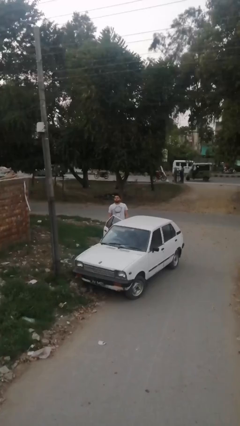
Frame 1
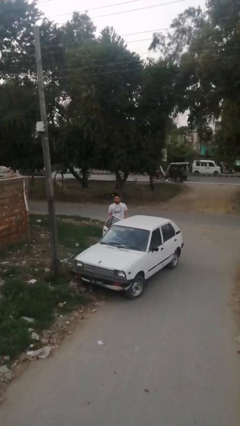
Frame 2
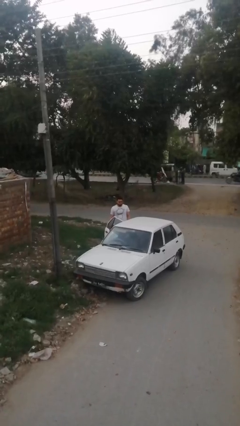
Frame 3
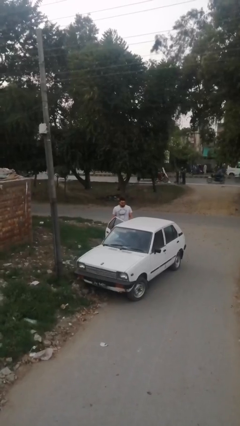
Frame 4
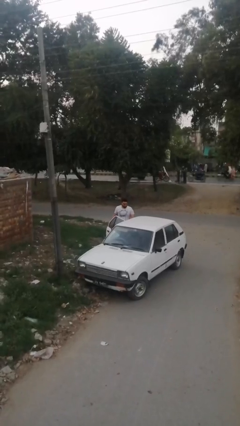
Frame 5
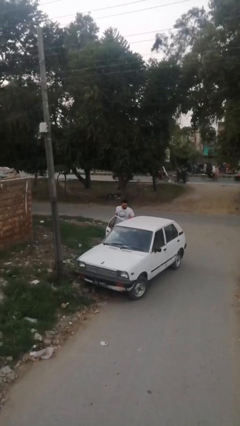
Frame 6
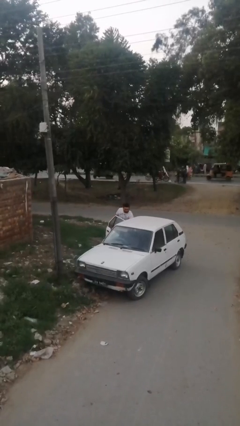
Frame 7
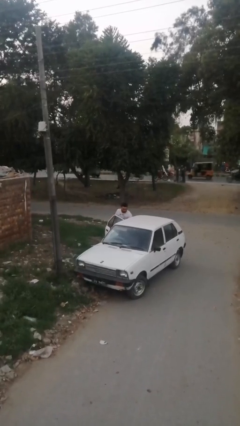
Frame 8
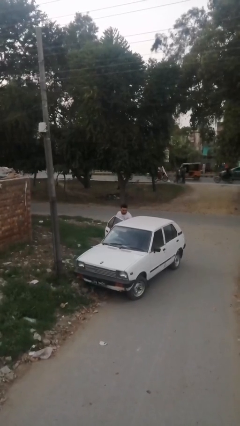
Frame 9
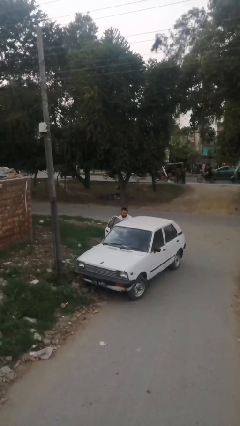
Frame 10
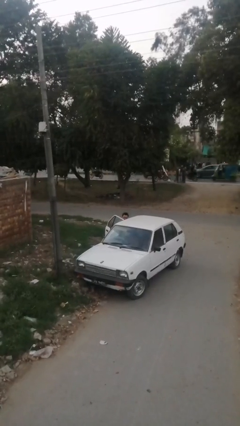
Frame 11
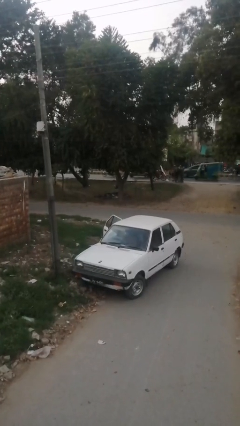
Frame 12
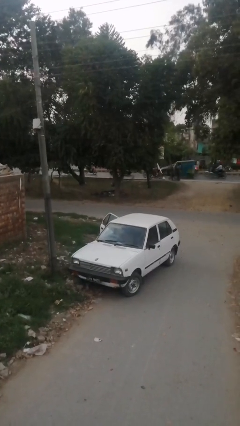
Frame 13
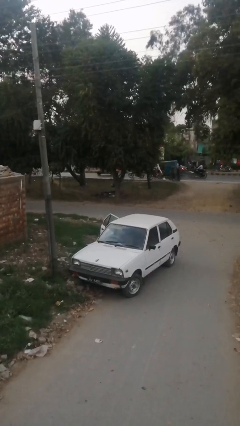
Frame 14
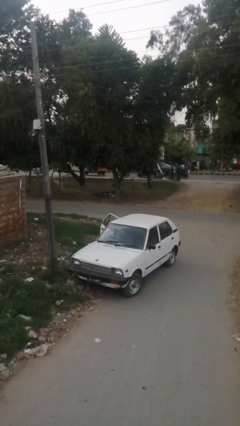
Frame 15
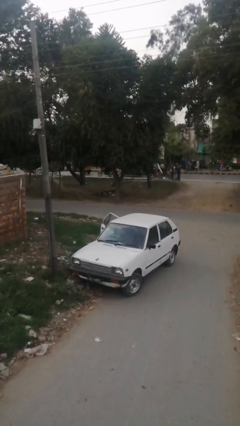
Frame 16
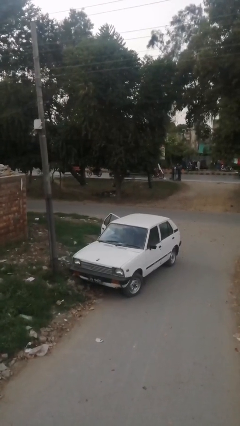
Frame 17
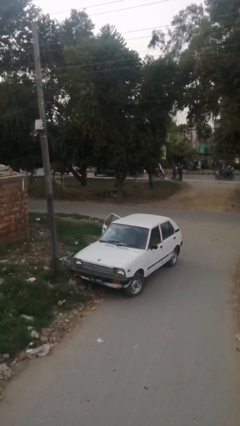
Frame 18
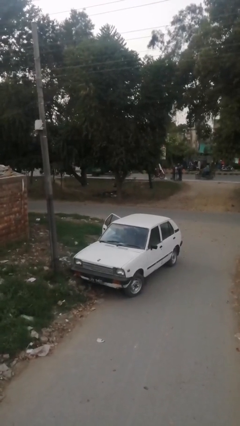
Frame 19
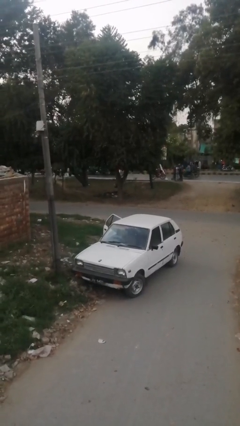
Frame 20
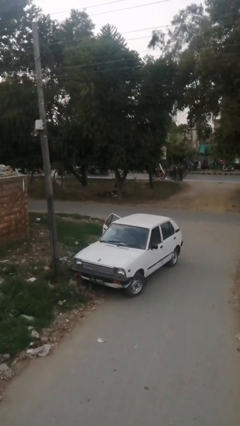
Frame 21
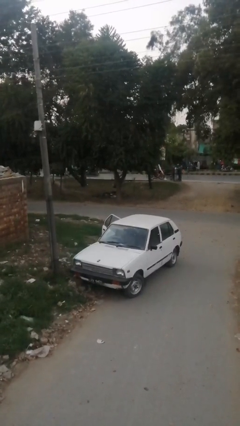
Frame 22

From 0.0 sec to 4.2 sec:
person enters car

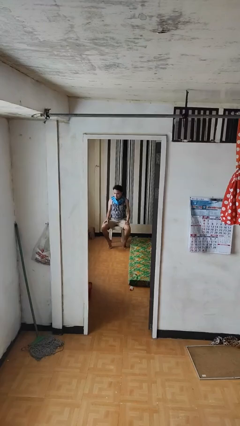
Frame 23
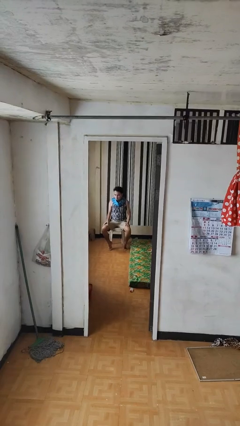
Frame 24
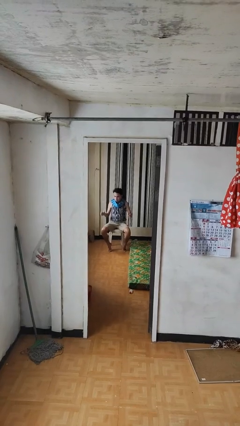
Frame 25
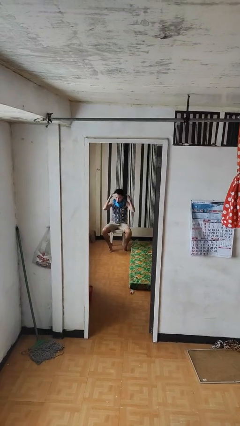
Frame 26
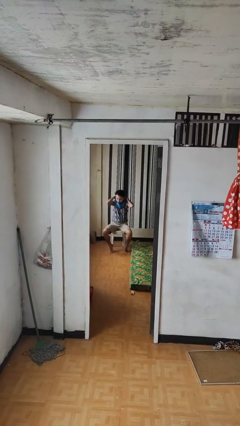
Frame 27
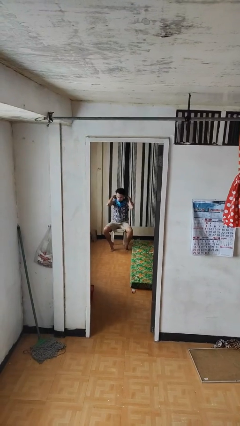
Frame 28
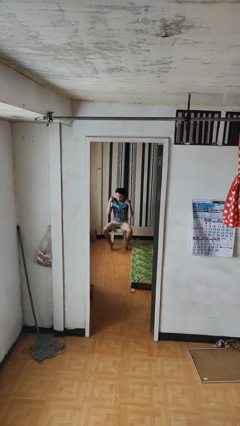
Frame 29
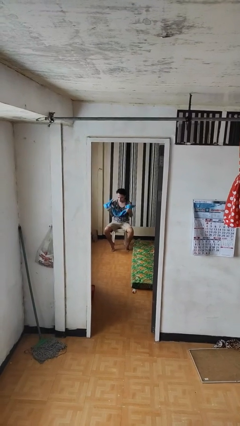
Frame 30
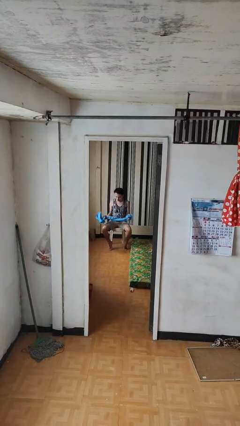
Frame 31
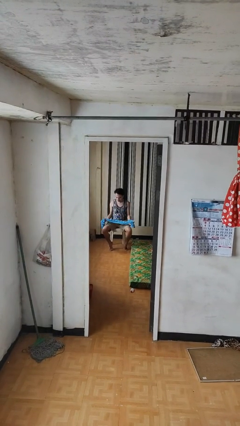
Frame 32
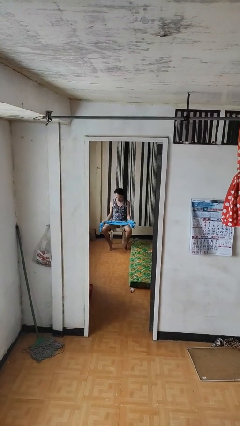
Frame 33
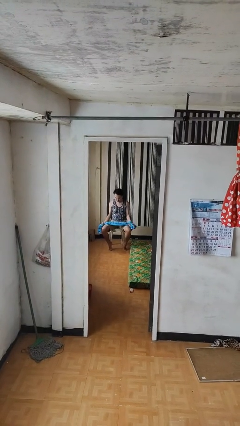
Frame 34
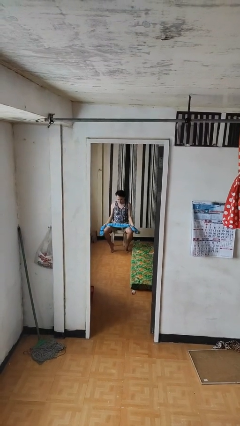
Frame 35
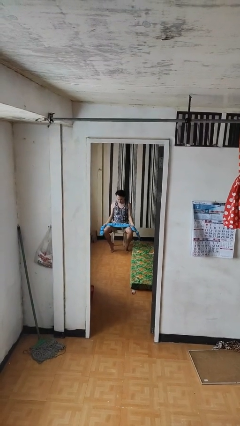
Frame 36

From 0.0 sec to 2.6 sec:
person takes off scarf

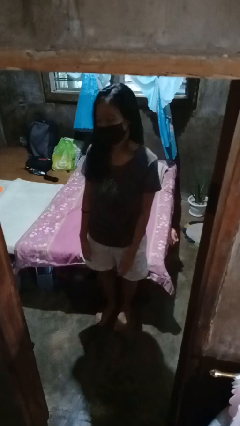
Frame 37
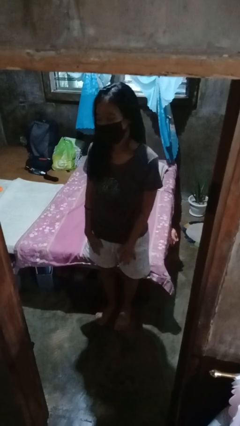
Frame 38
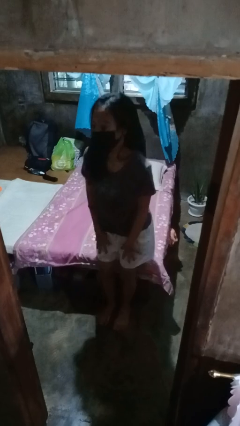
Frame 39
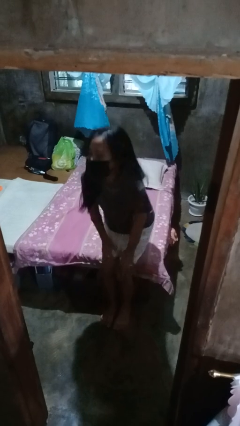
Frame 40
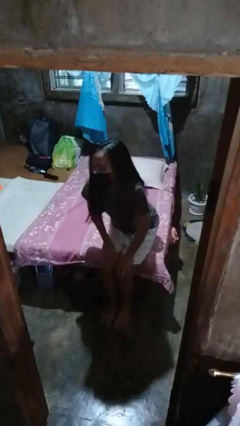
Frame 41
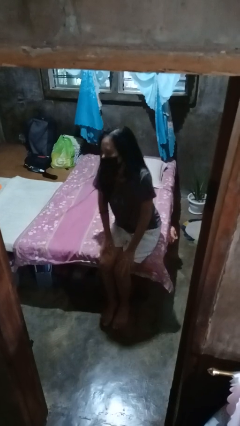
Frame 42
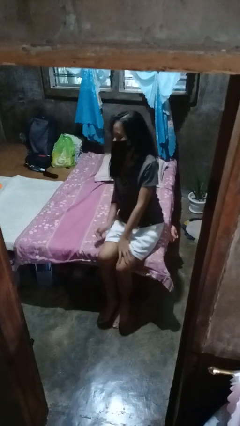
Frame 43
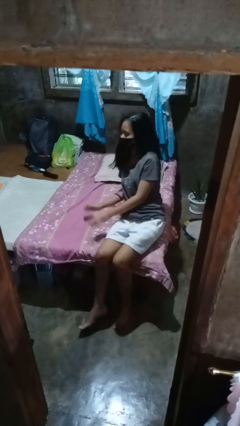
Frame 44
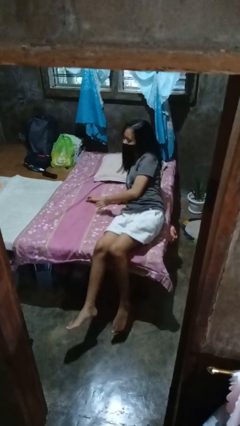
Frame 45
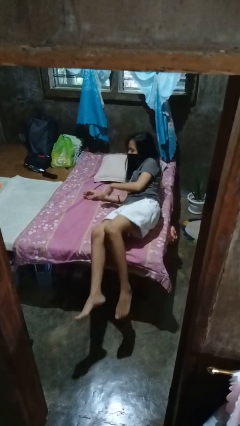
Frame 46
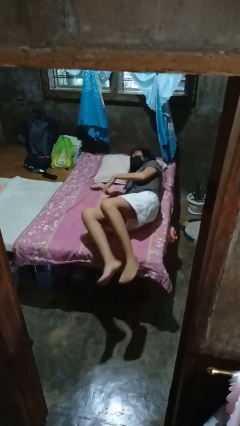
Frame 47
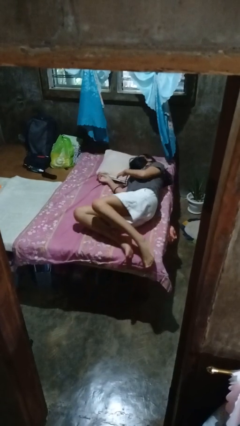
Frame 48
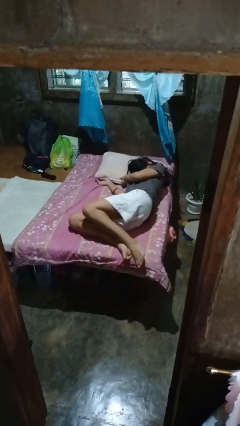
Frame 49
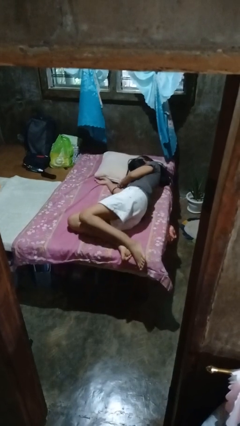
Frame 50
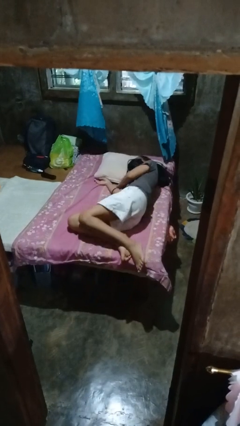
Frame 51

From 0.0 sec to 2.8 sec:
person lies down on bed

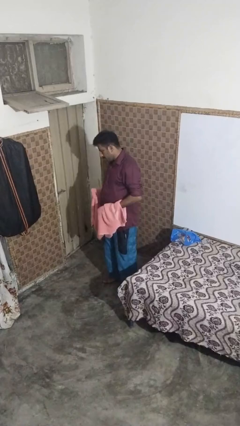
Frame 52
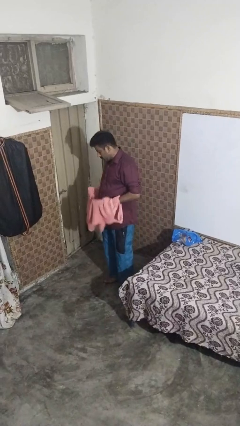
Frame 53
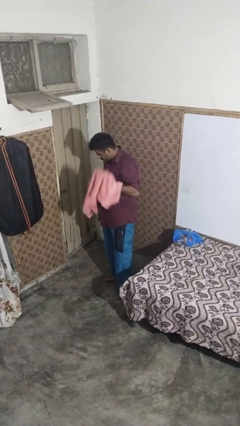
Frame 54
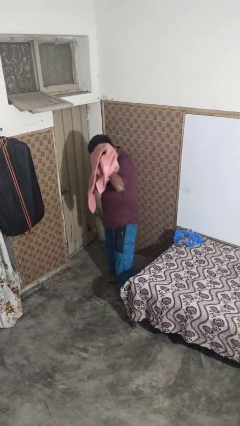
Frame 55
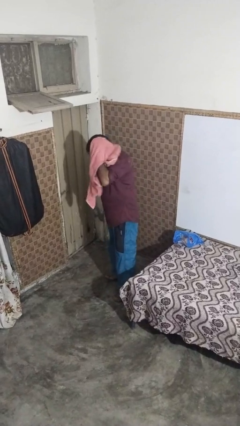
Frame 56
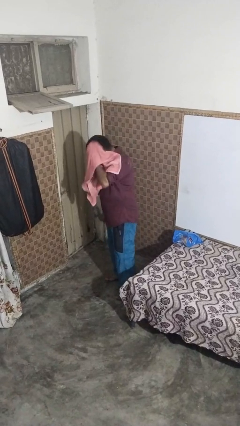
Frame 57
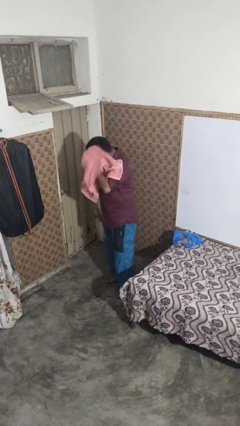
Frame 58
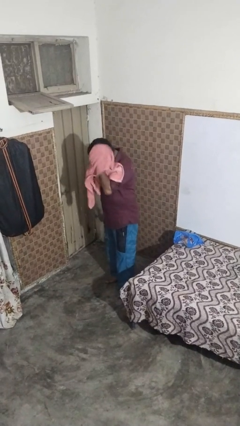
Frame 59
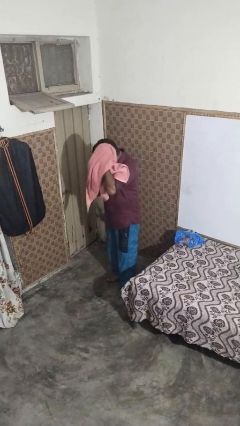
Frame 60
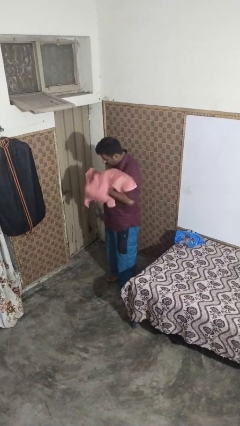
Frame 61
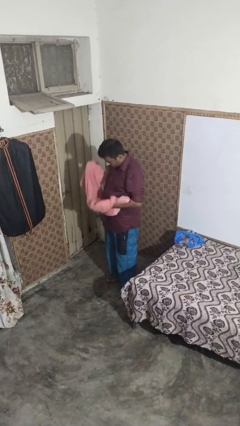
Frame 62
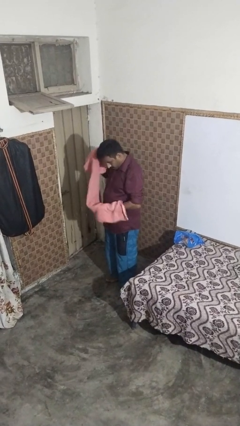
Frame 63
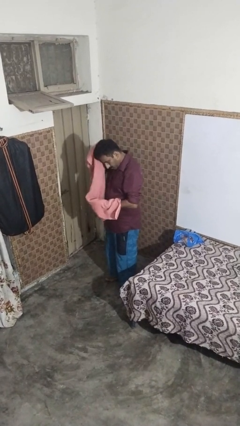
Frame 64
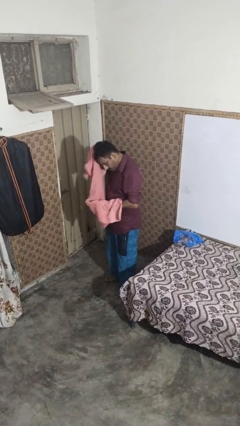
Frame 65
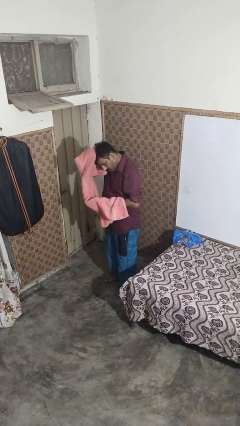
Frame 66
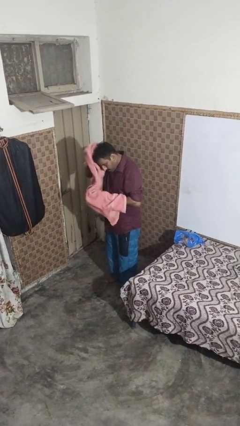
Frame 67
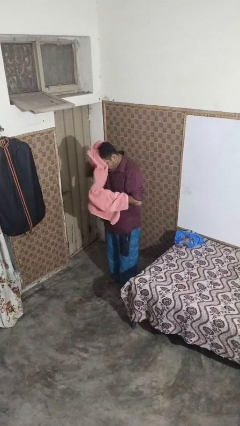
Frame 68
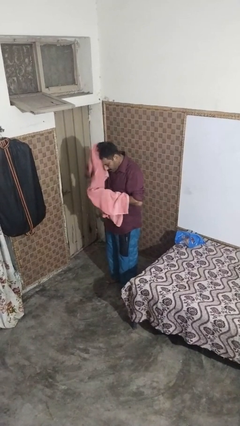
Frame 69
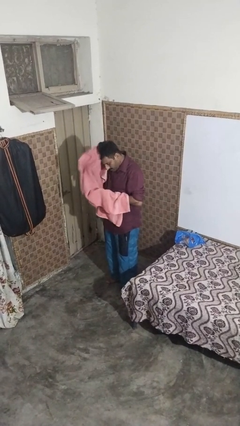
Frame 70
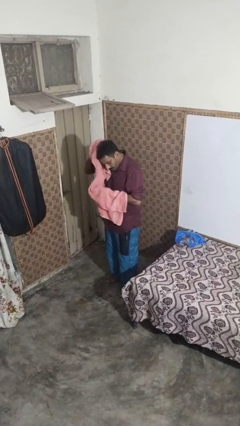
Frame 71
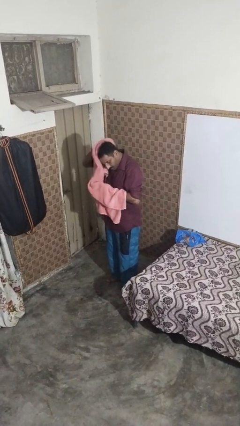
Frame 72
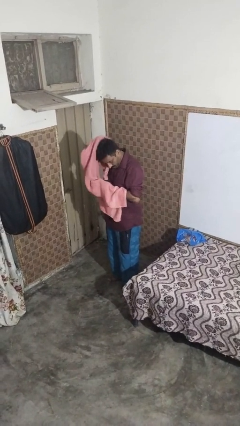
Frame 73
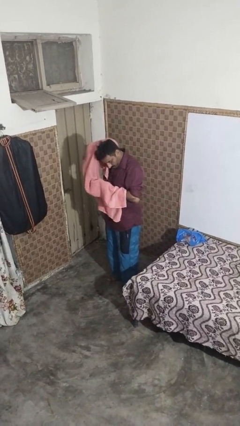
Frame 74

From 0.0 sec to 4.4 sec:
person dries hair with towel

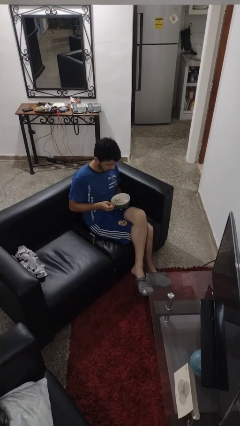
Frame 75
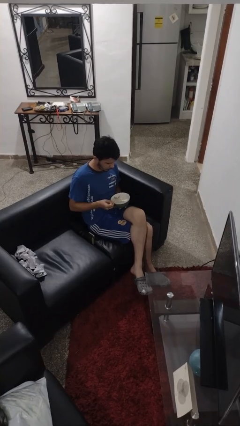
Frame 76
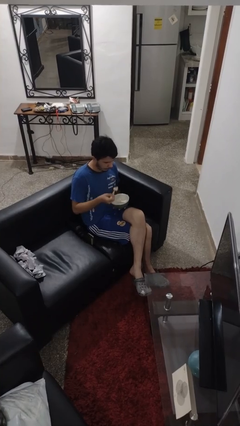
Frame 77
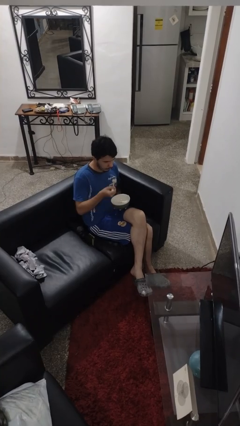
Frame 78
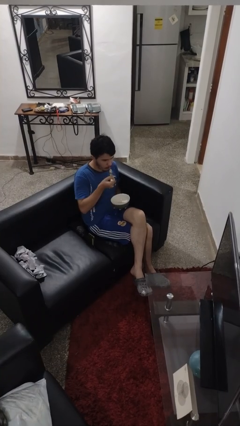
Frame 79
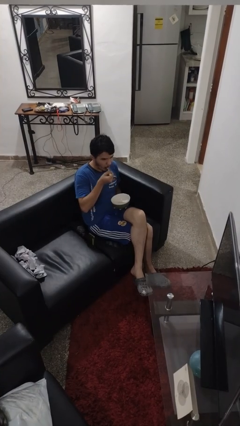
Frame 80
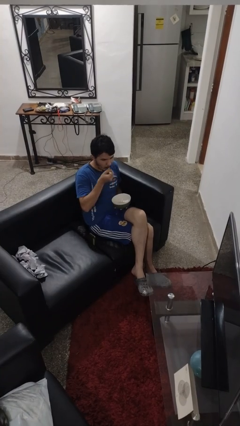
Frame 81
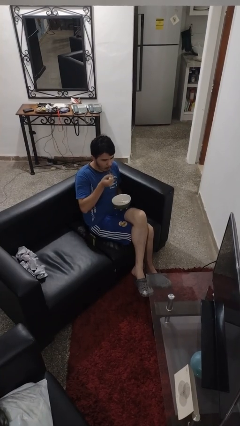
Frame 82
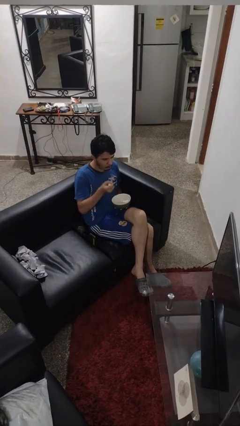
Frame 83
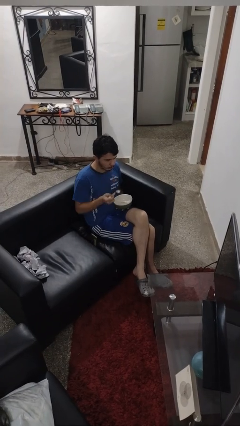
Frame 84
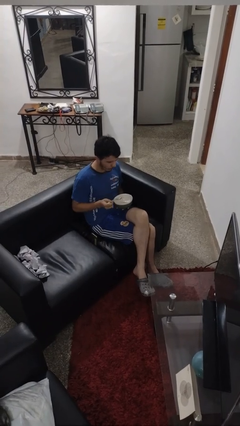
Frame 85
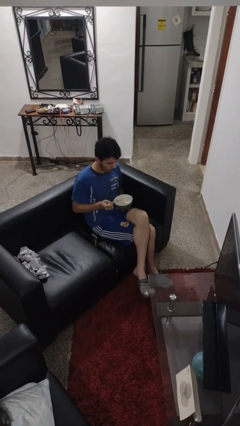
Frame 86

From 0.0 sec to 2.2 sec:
person eats with utensil

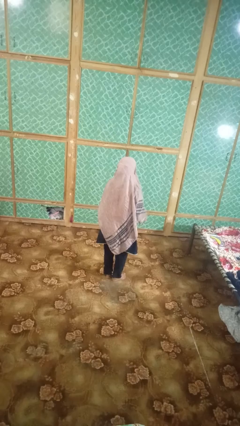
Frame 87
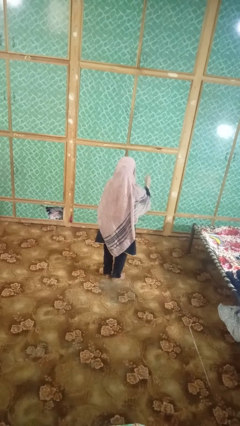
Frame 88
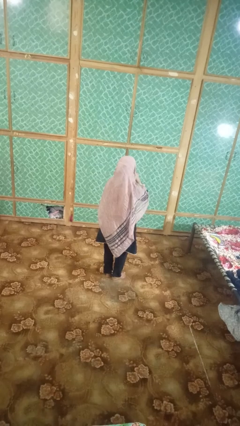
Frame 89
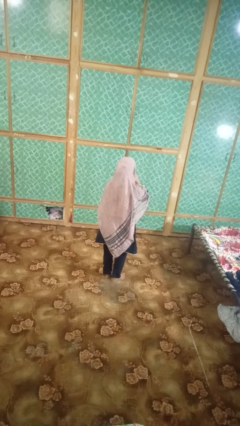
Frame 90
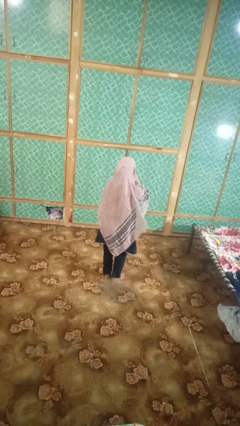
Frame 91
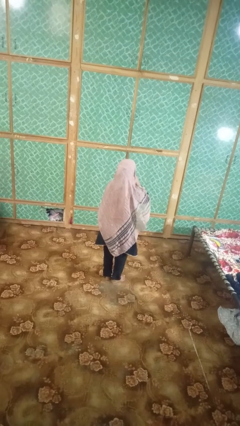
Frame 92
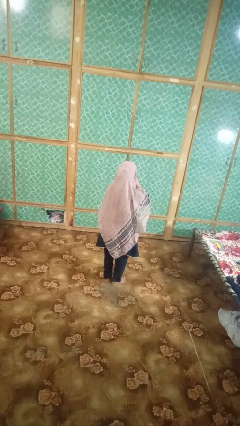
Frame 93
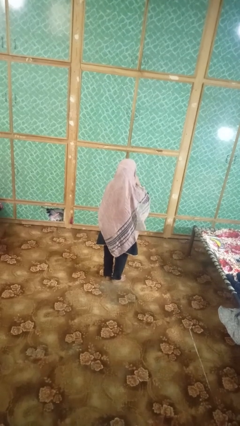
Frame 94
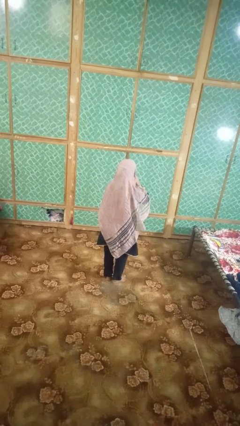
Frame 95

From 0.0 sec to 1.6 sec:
person gestures be quiet
